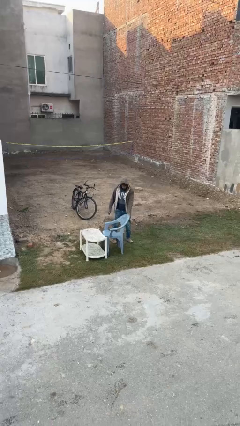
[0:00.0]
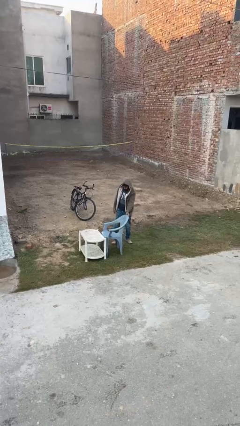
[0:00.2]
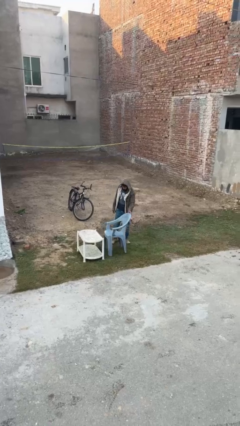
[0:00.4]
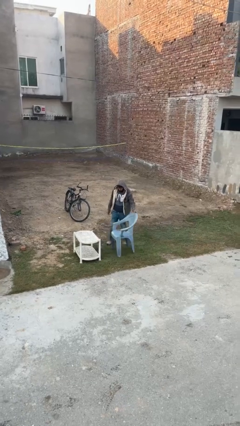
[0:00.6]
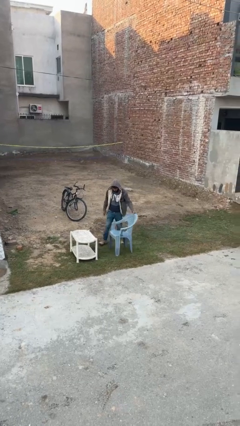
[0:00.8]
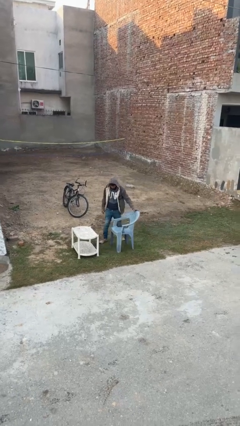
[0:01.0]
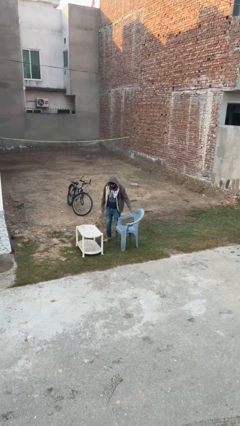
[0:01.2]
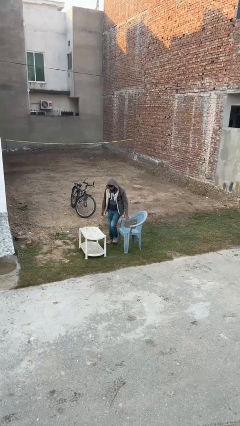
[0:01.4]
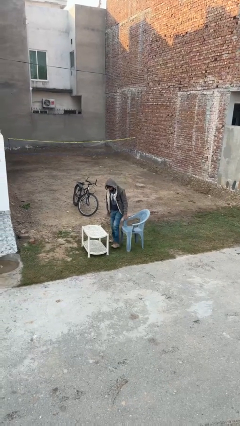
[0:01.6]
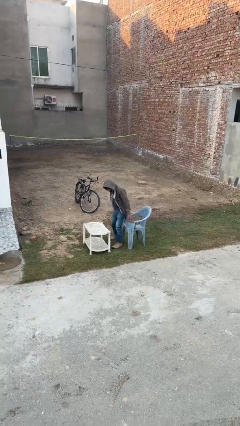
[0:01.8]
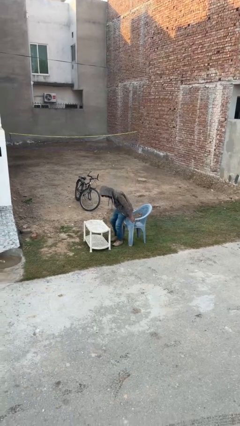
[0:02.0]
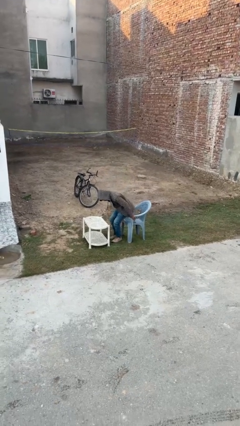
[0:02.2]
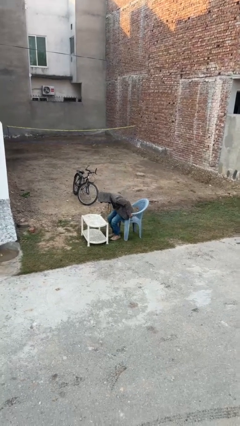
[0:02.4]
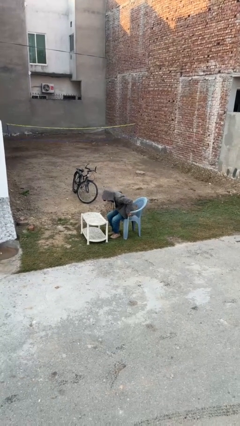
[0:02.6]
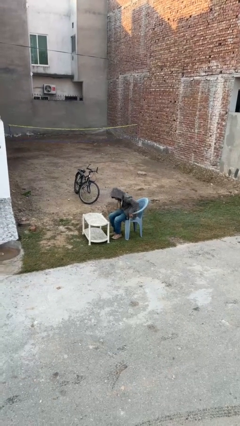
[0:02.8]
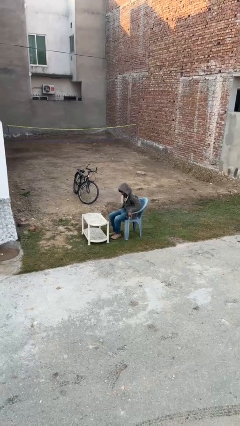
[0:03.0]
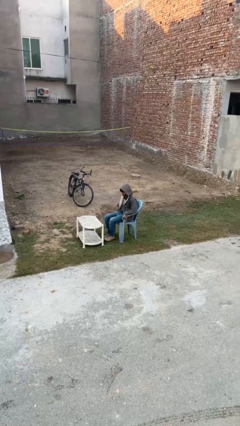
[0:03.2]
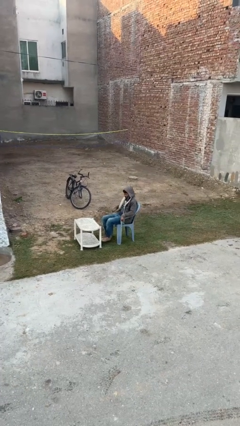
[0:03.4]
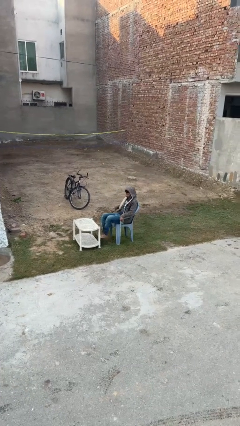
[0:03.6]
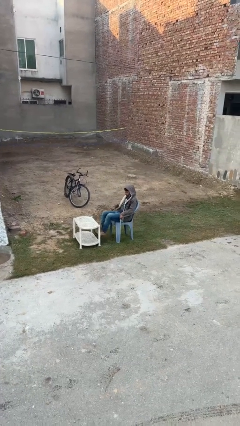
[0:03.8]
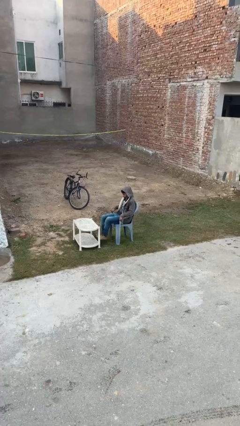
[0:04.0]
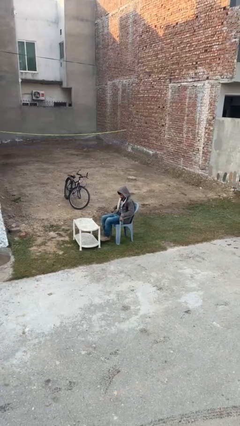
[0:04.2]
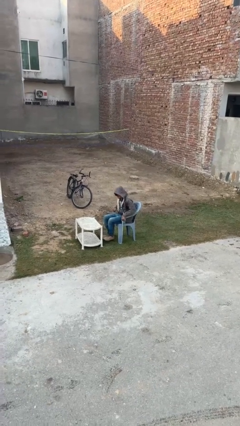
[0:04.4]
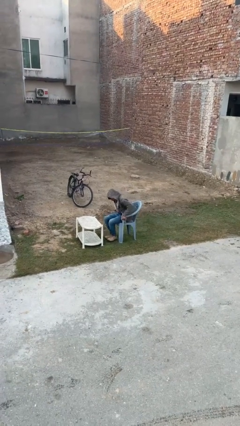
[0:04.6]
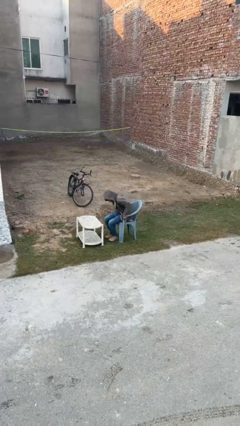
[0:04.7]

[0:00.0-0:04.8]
person sits down

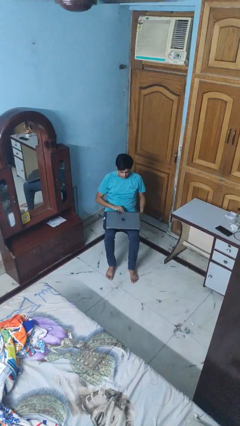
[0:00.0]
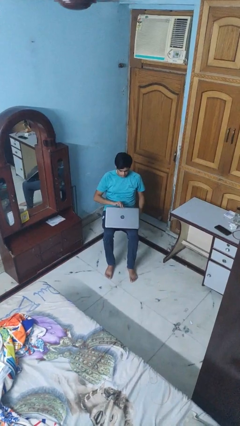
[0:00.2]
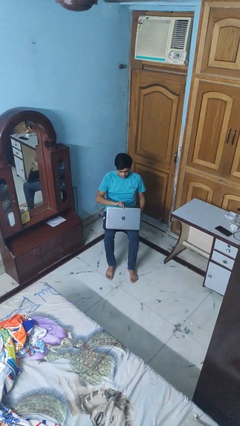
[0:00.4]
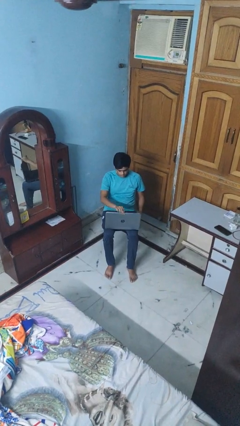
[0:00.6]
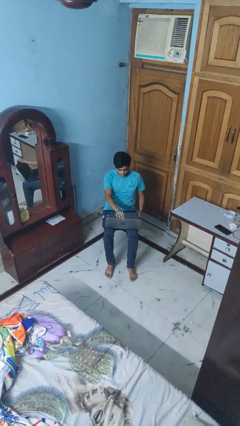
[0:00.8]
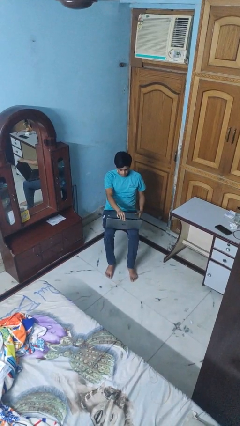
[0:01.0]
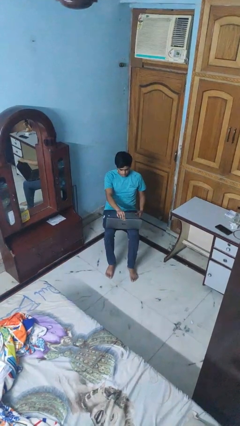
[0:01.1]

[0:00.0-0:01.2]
person opens laptop

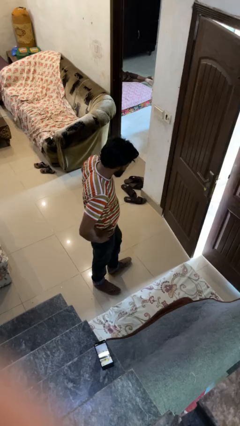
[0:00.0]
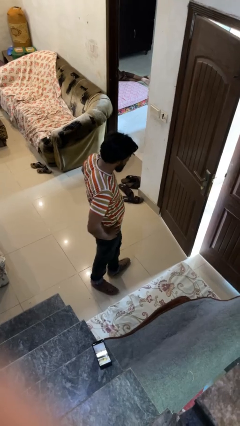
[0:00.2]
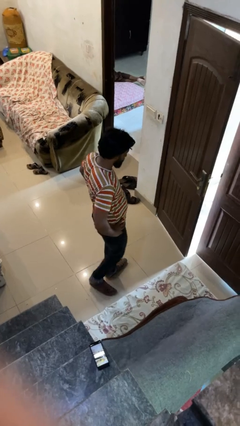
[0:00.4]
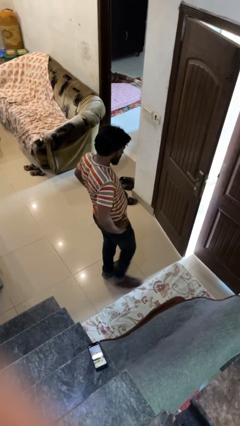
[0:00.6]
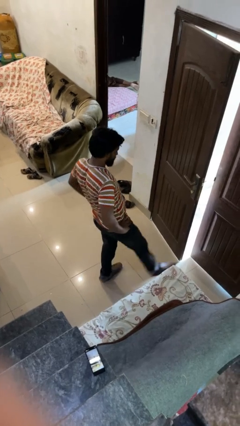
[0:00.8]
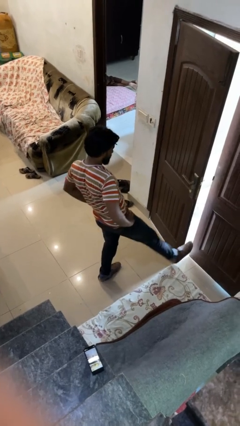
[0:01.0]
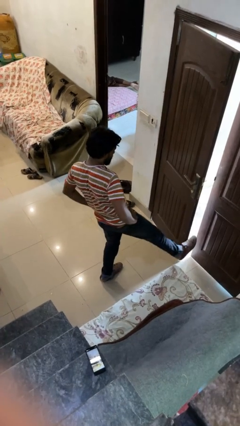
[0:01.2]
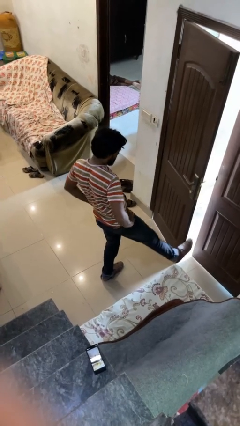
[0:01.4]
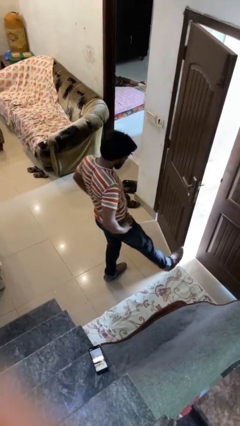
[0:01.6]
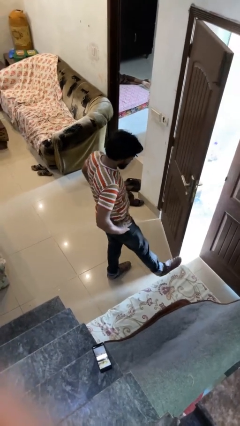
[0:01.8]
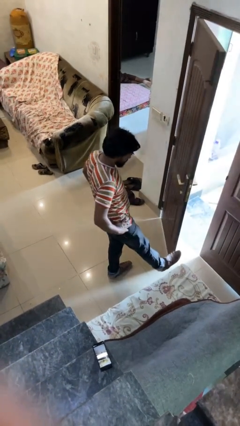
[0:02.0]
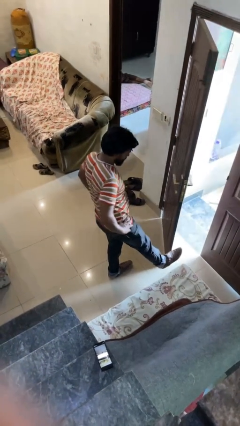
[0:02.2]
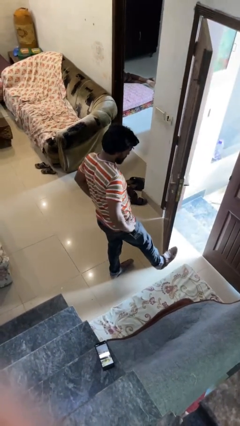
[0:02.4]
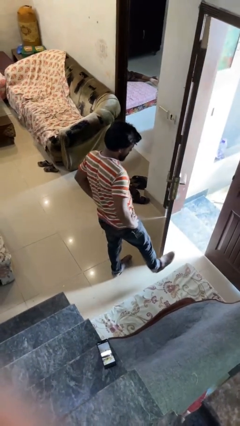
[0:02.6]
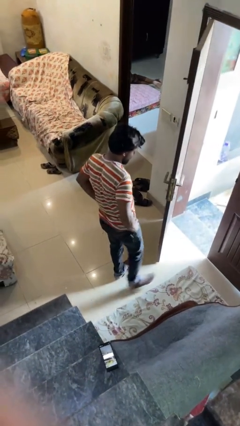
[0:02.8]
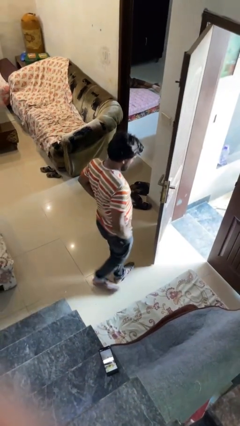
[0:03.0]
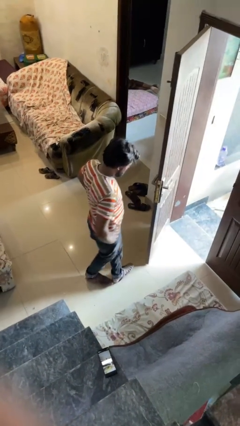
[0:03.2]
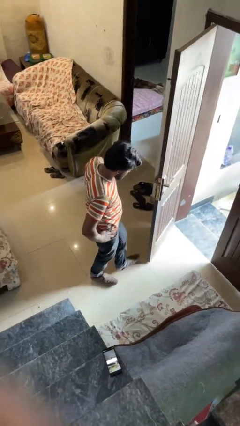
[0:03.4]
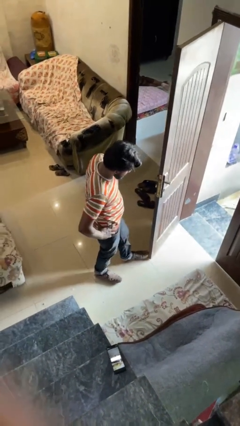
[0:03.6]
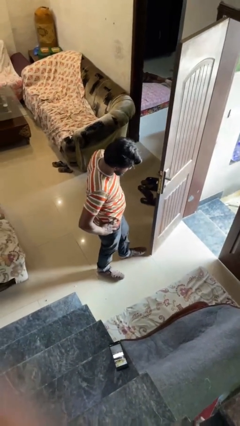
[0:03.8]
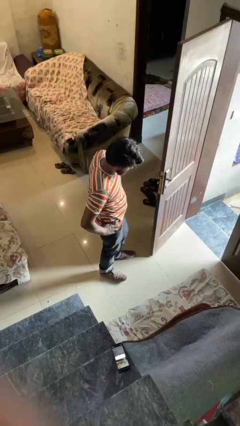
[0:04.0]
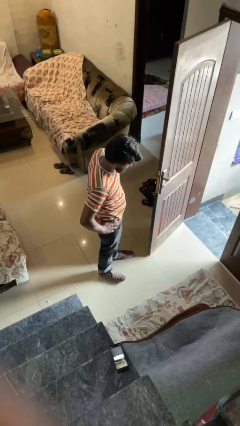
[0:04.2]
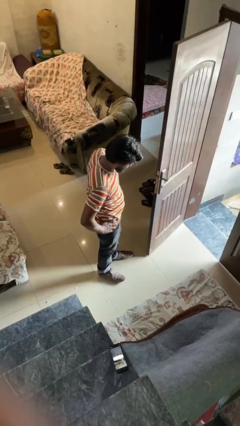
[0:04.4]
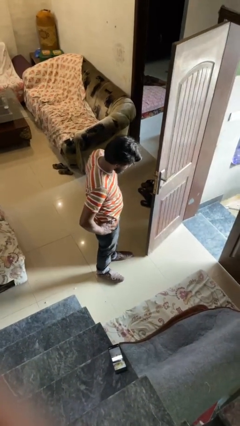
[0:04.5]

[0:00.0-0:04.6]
person opens facility door

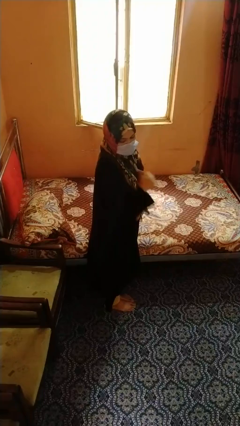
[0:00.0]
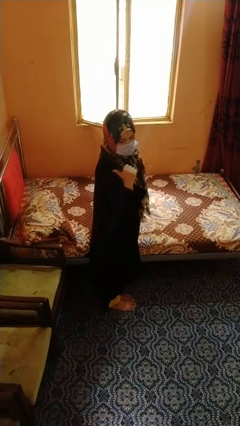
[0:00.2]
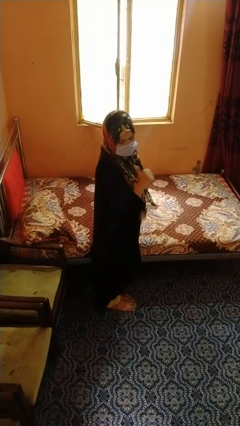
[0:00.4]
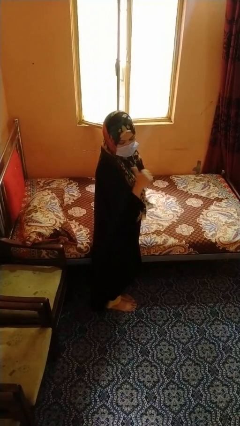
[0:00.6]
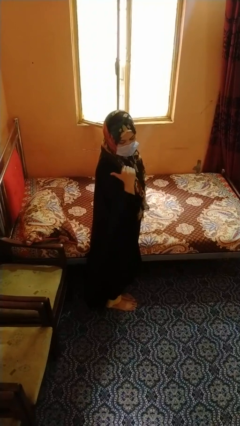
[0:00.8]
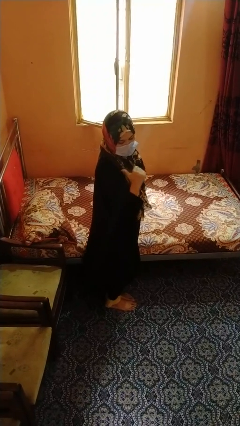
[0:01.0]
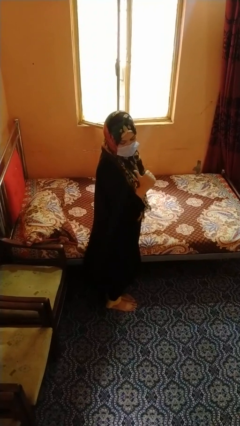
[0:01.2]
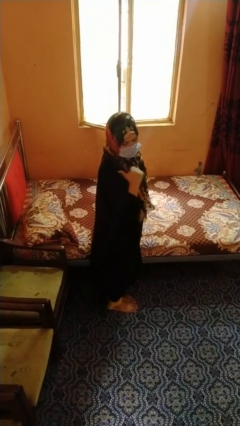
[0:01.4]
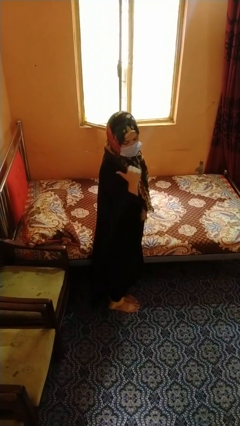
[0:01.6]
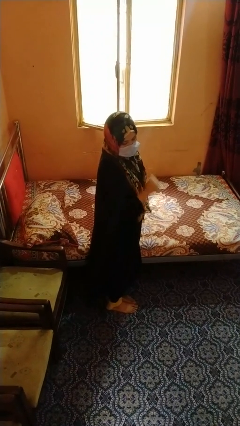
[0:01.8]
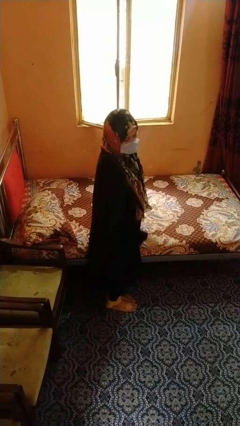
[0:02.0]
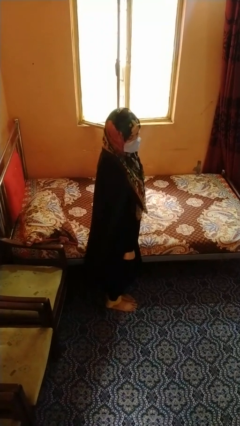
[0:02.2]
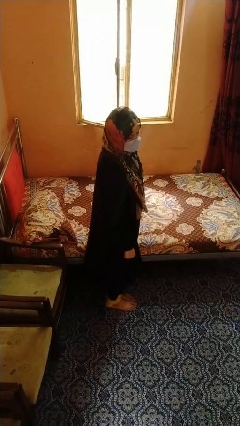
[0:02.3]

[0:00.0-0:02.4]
person gestures behind me

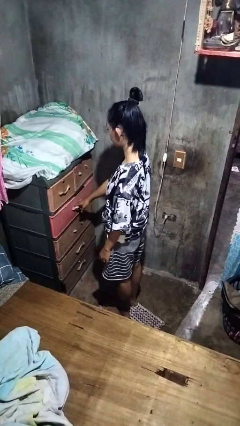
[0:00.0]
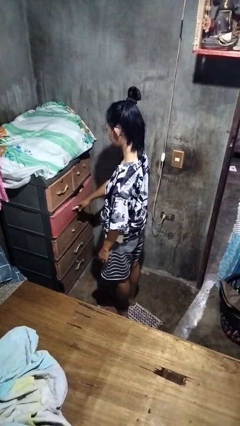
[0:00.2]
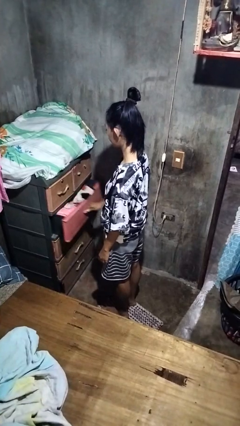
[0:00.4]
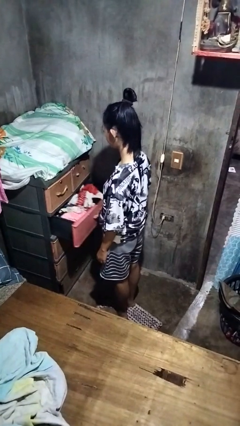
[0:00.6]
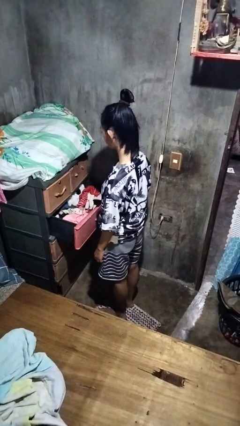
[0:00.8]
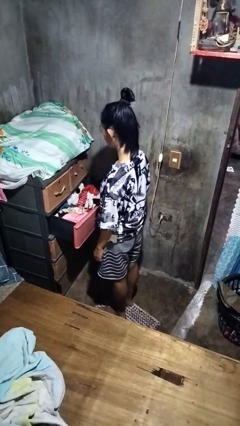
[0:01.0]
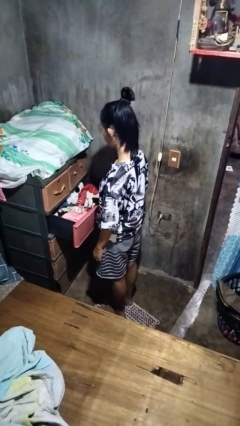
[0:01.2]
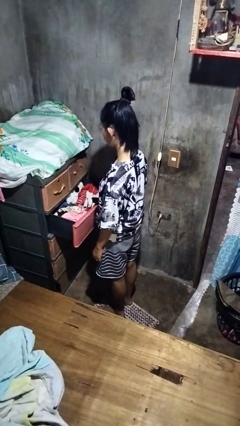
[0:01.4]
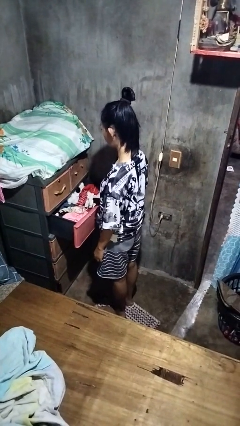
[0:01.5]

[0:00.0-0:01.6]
person opens dresser drawer

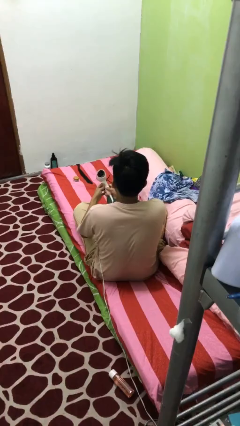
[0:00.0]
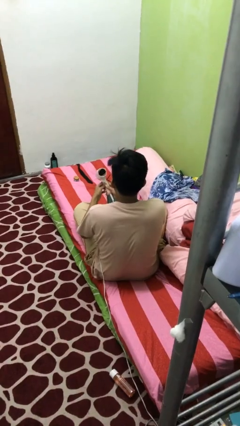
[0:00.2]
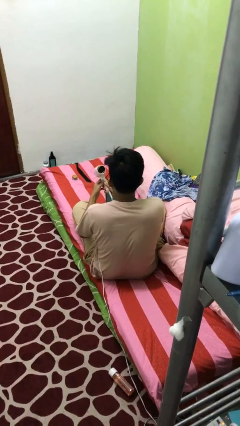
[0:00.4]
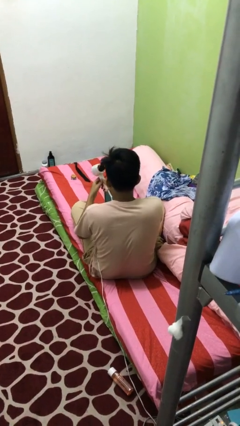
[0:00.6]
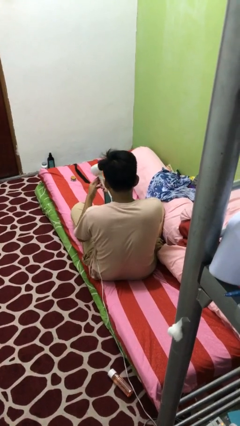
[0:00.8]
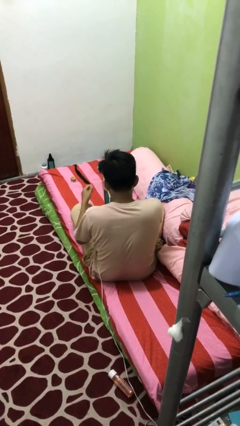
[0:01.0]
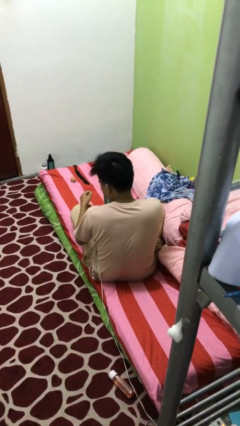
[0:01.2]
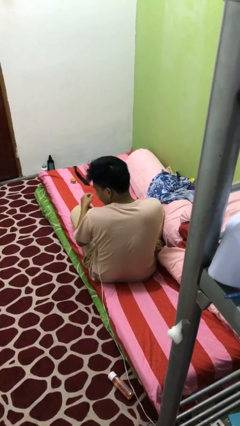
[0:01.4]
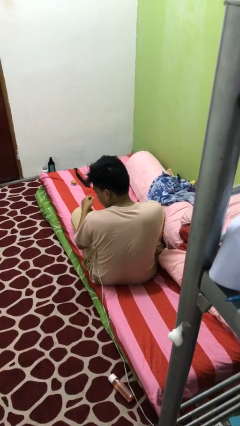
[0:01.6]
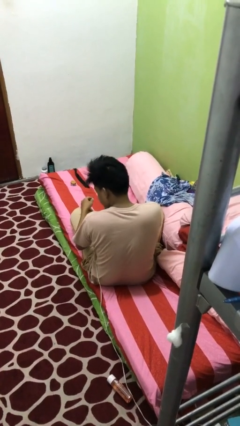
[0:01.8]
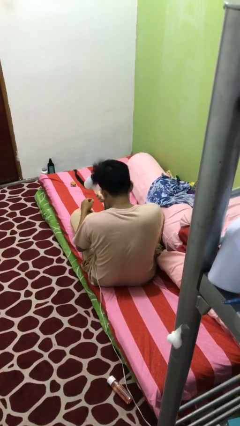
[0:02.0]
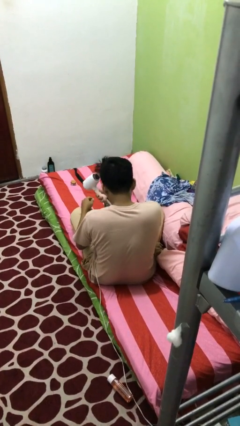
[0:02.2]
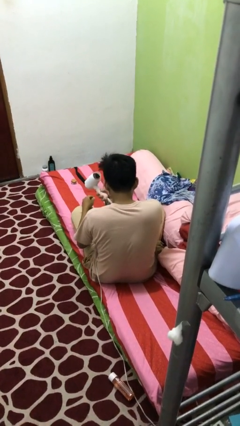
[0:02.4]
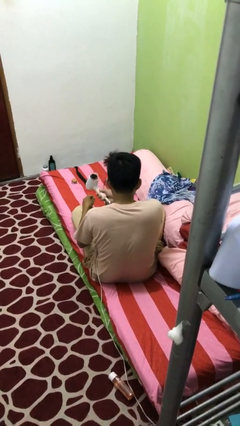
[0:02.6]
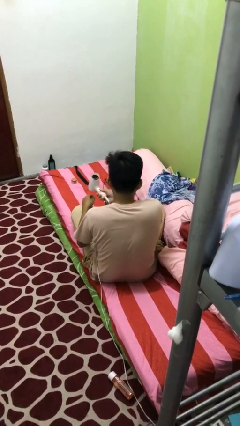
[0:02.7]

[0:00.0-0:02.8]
person dries hair with hairdryer
